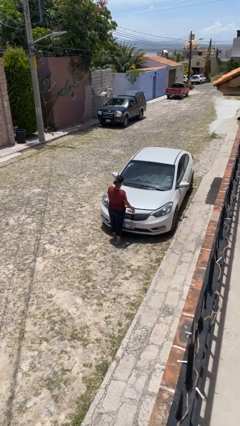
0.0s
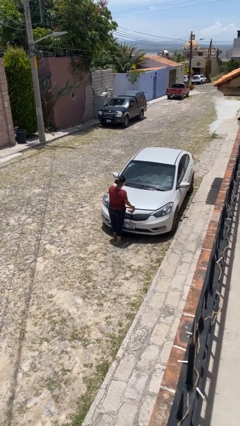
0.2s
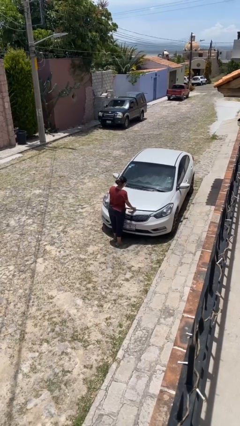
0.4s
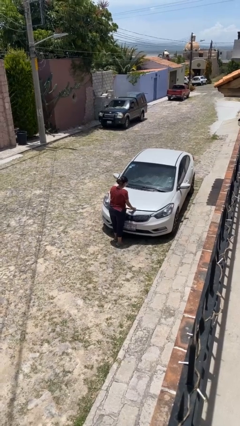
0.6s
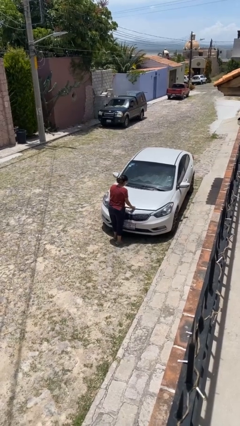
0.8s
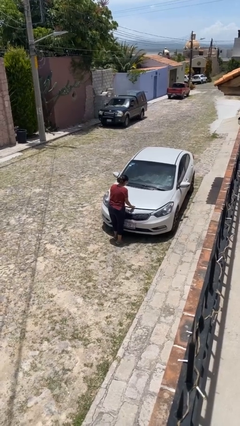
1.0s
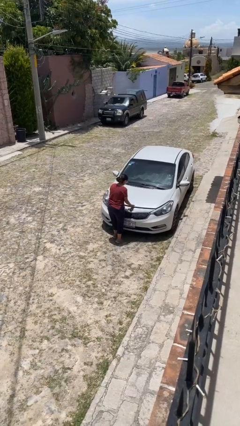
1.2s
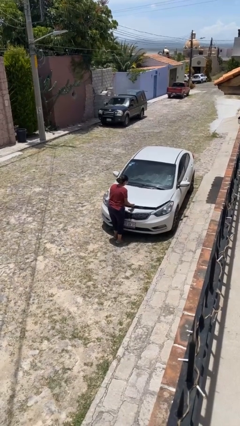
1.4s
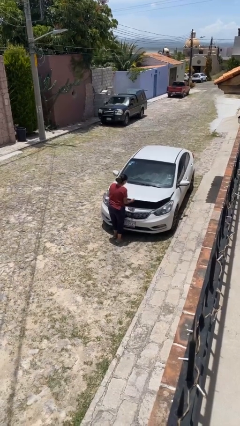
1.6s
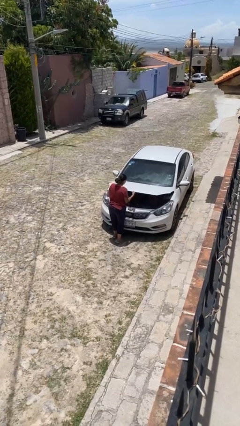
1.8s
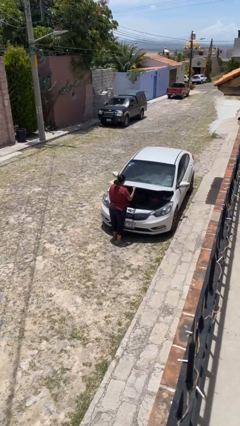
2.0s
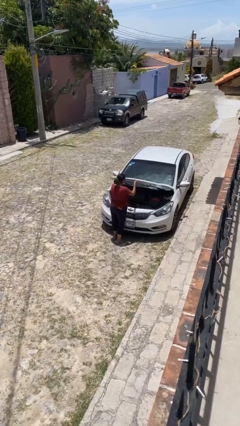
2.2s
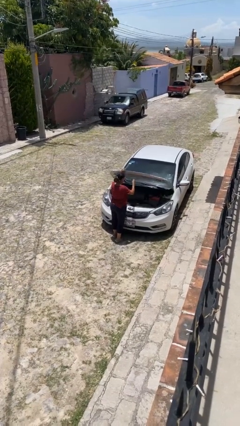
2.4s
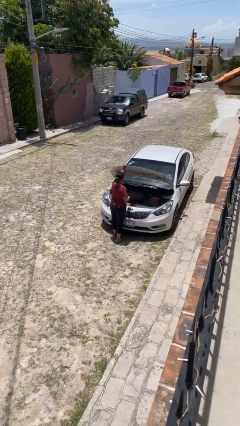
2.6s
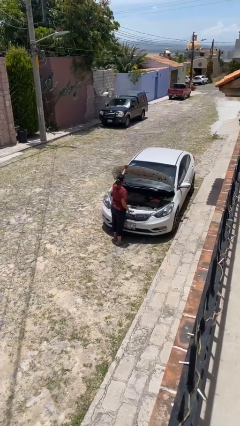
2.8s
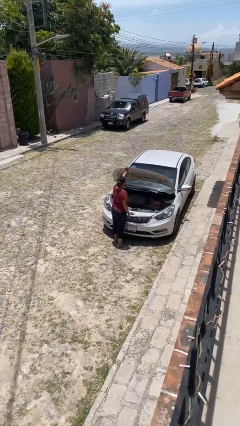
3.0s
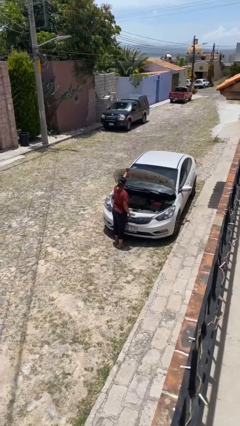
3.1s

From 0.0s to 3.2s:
person opens car hood

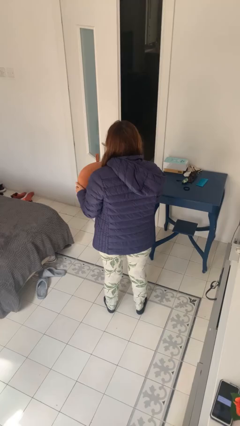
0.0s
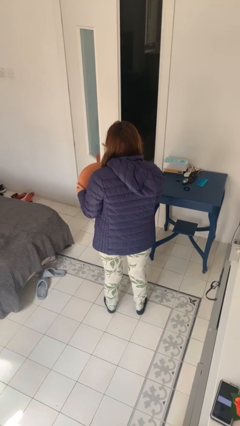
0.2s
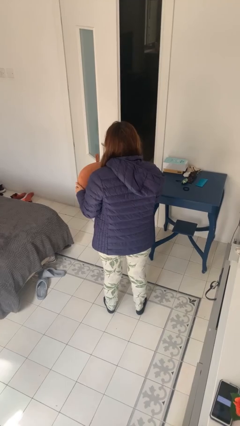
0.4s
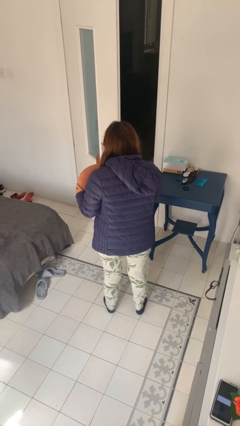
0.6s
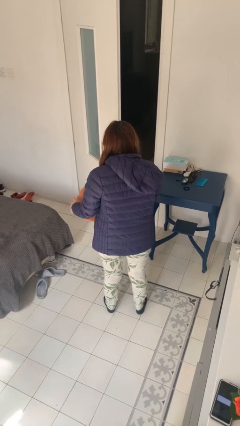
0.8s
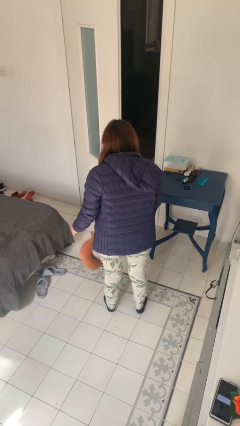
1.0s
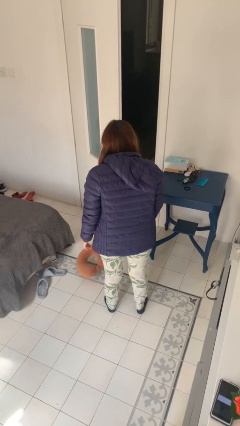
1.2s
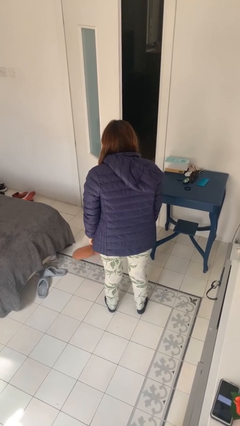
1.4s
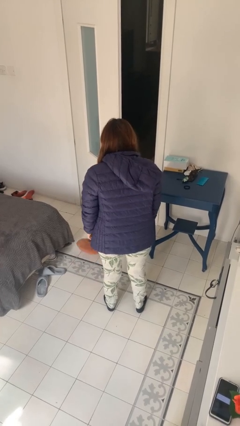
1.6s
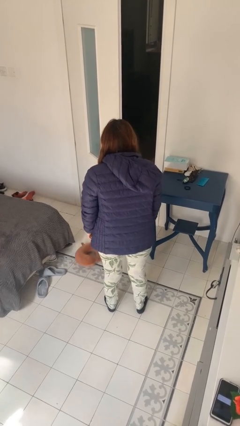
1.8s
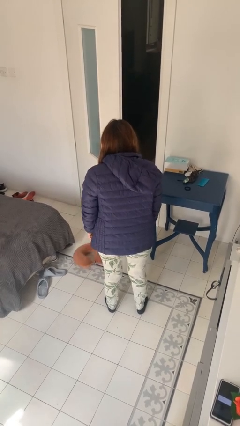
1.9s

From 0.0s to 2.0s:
person throws object into air

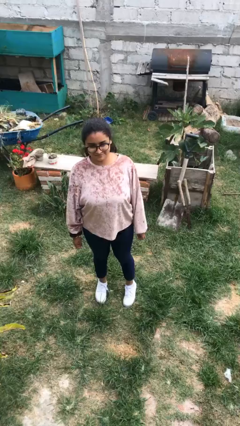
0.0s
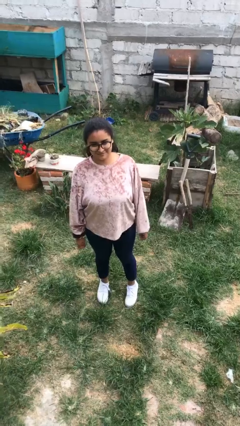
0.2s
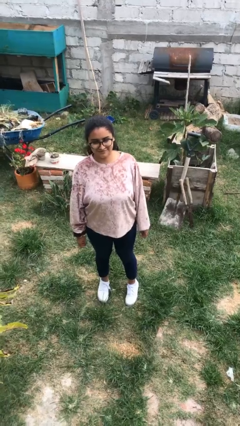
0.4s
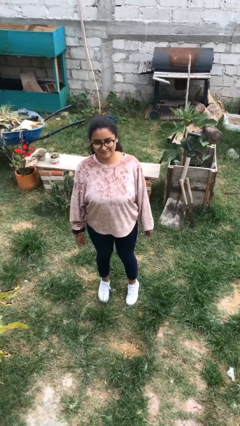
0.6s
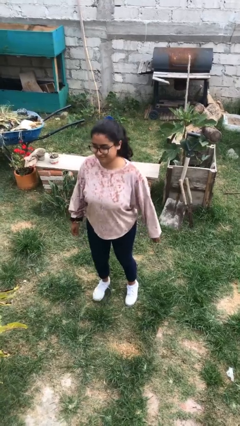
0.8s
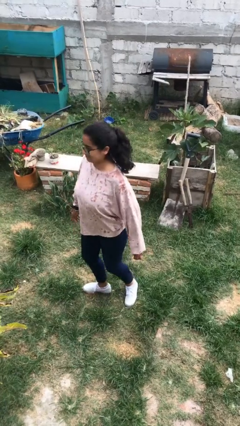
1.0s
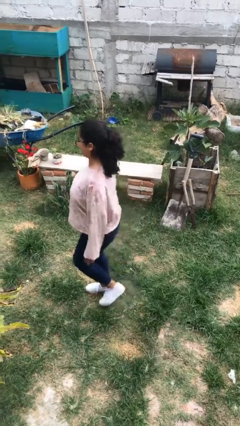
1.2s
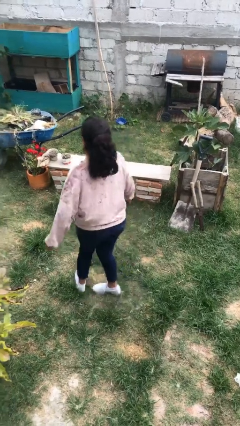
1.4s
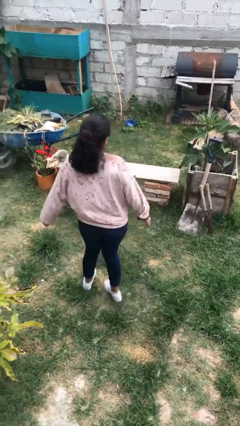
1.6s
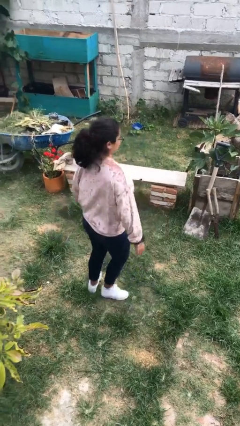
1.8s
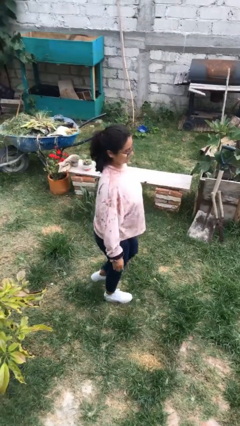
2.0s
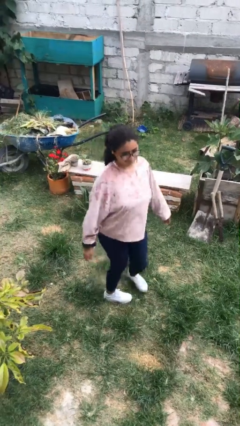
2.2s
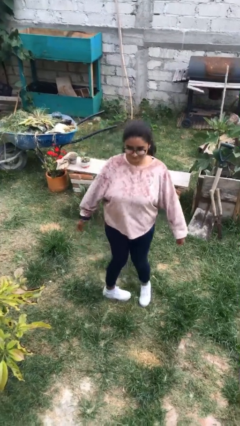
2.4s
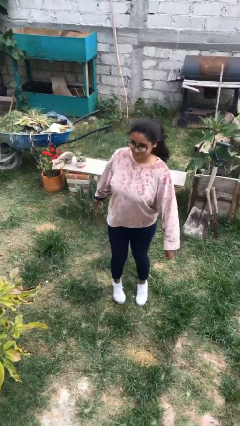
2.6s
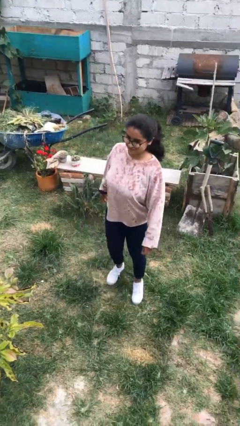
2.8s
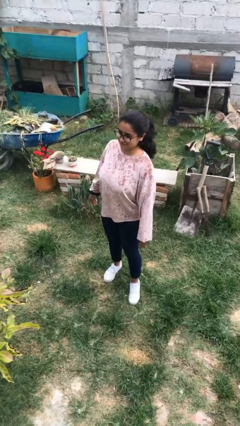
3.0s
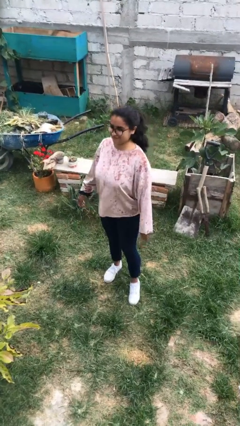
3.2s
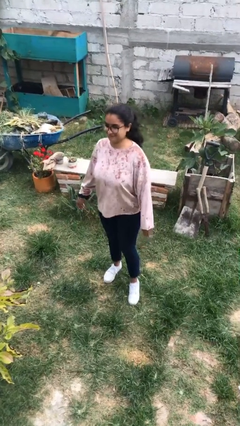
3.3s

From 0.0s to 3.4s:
person twirls

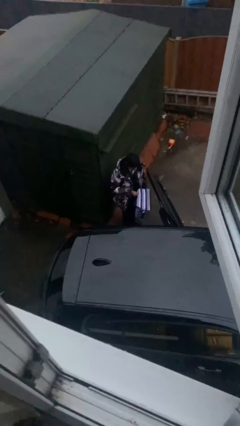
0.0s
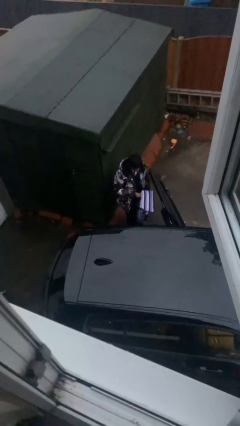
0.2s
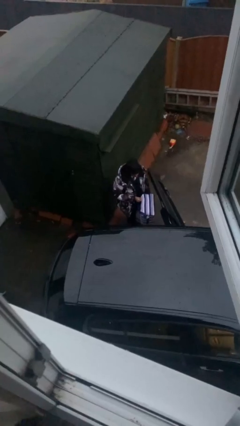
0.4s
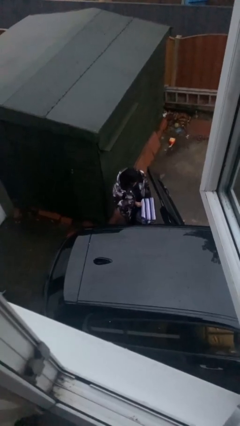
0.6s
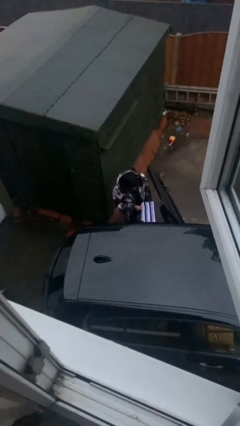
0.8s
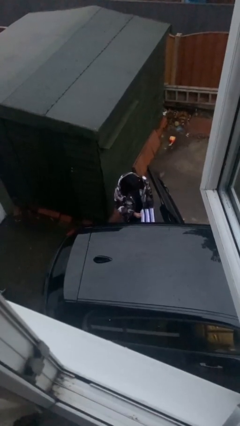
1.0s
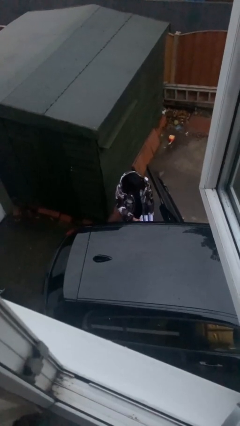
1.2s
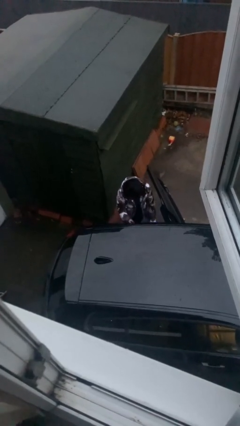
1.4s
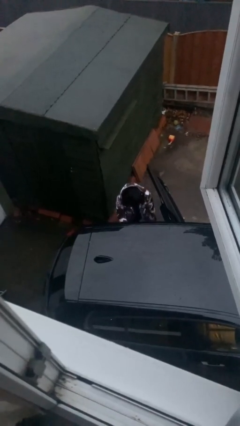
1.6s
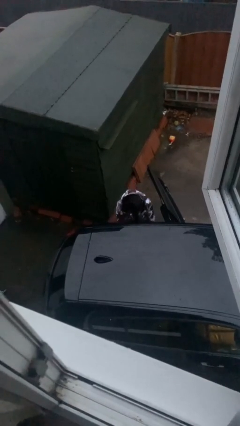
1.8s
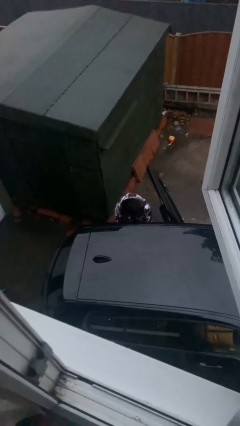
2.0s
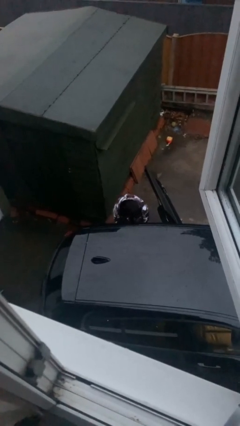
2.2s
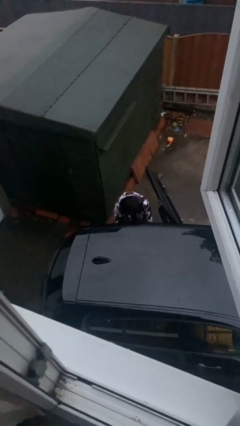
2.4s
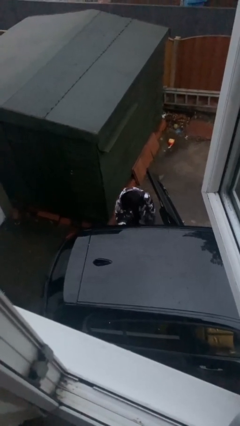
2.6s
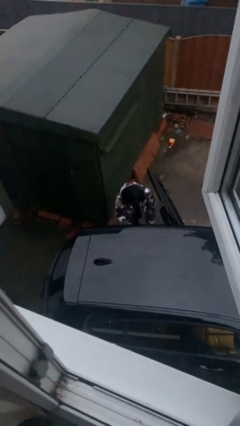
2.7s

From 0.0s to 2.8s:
person loads car

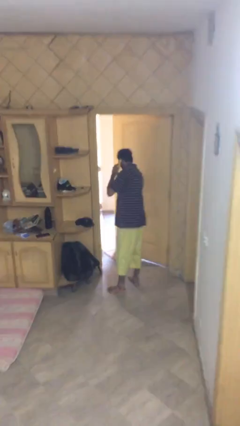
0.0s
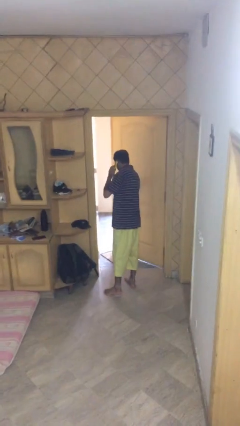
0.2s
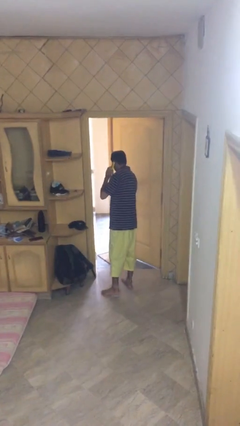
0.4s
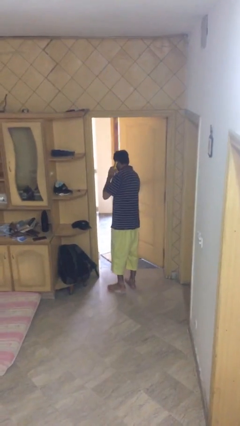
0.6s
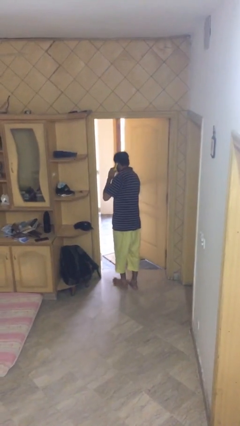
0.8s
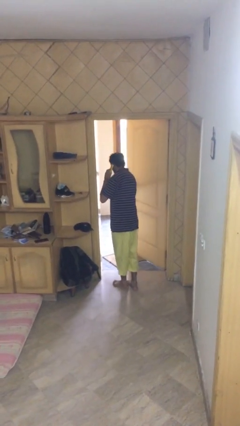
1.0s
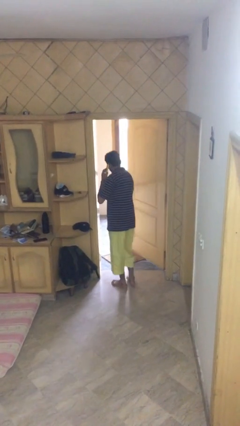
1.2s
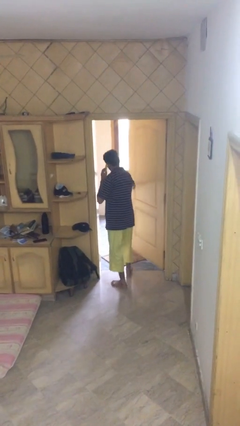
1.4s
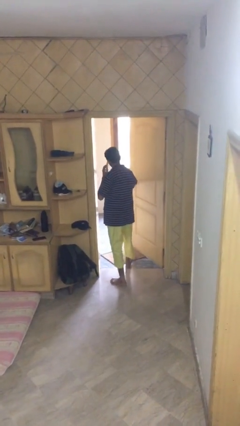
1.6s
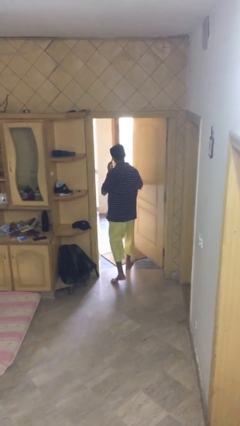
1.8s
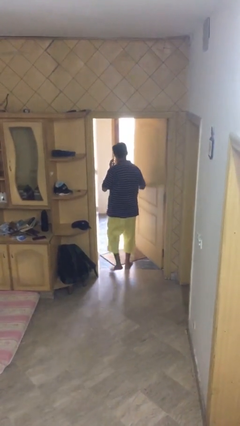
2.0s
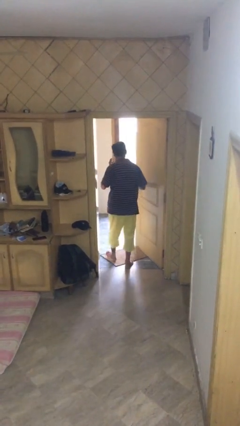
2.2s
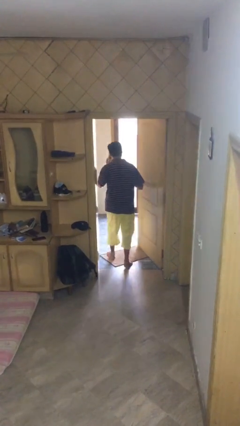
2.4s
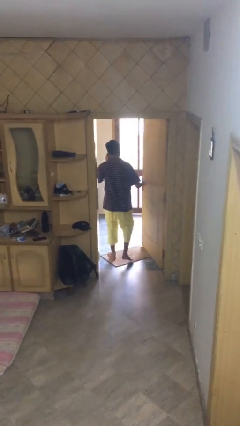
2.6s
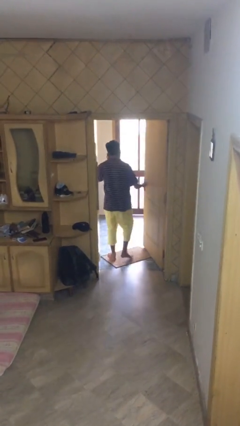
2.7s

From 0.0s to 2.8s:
person exits scene through structure

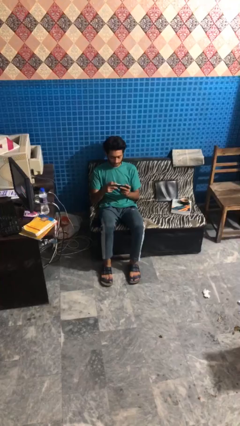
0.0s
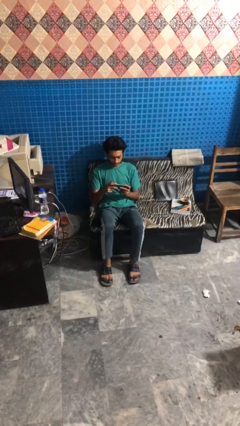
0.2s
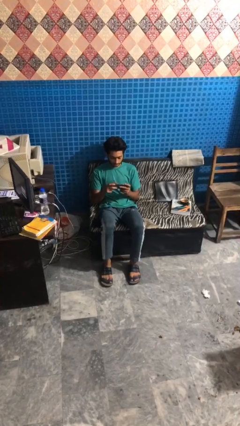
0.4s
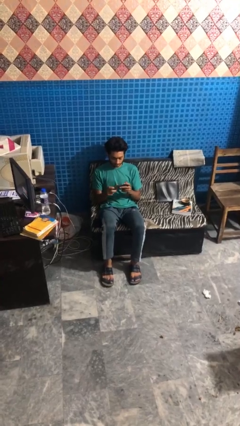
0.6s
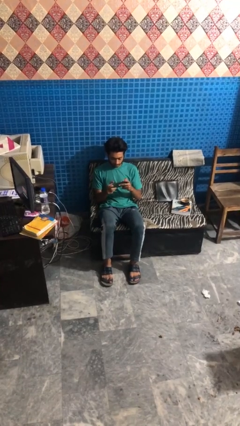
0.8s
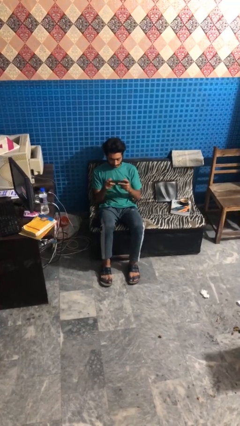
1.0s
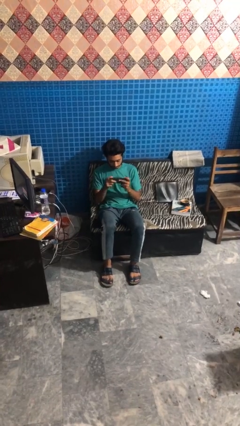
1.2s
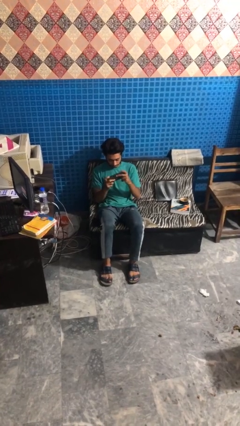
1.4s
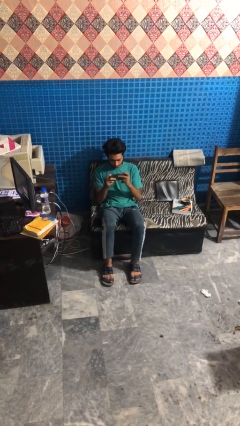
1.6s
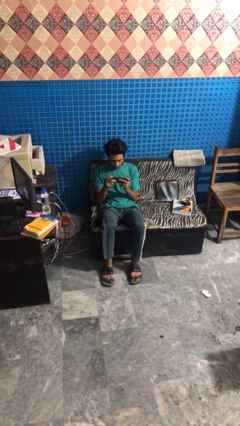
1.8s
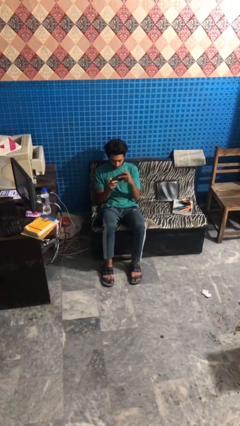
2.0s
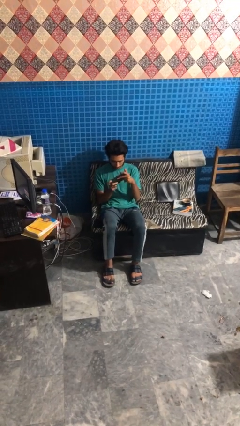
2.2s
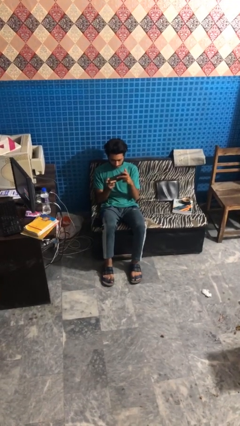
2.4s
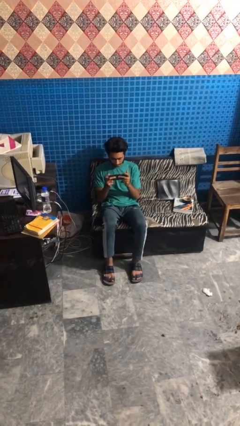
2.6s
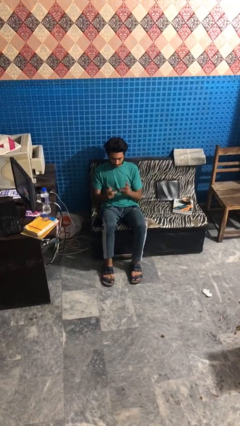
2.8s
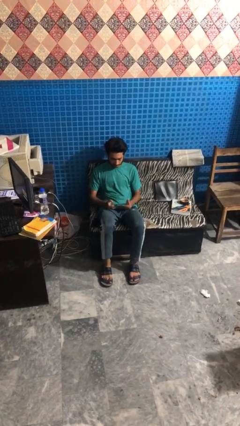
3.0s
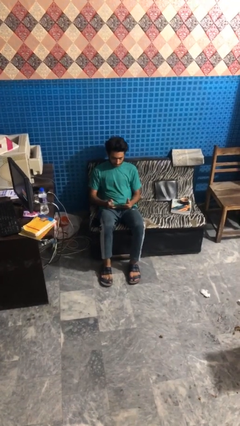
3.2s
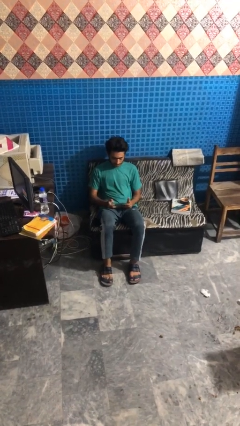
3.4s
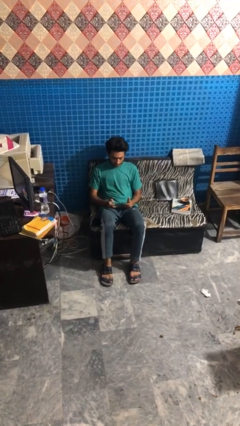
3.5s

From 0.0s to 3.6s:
person interacts with handheld game
